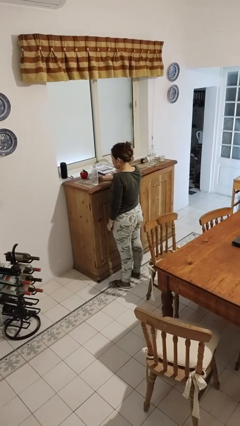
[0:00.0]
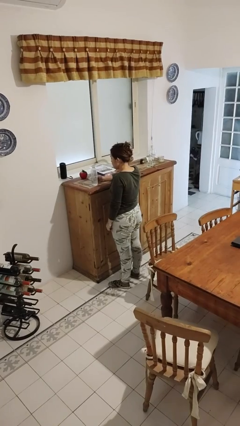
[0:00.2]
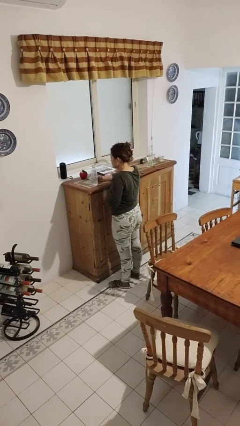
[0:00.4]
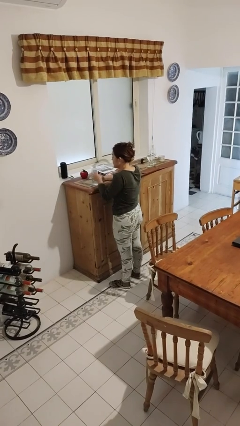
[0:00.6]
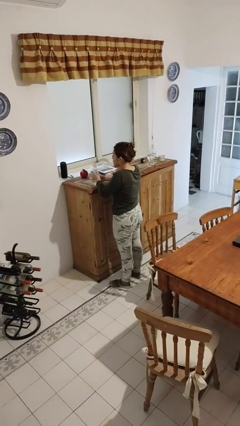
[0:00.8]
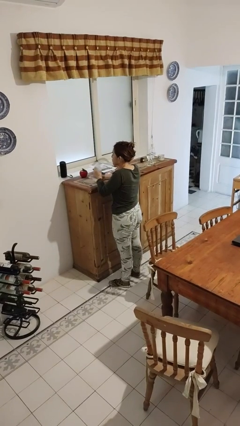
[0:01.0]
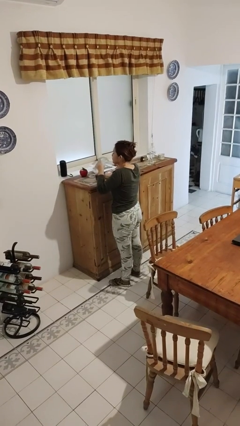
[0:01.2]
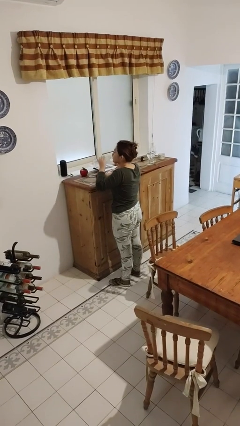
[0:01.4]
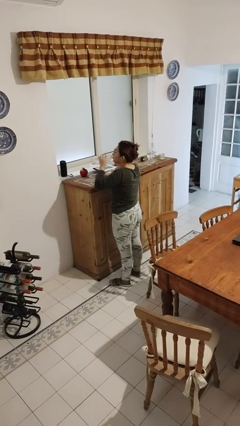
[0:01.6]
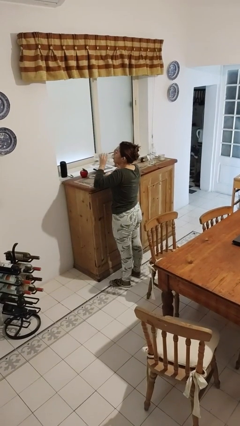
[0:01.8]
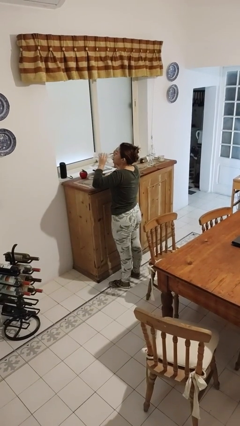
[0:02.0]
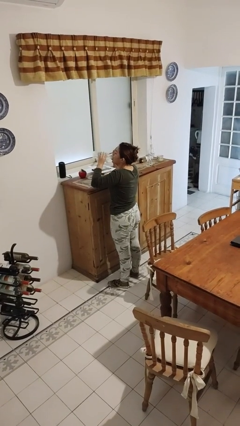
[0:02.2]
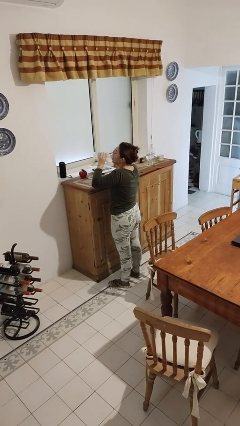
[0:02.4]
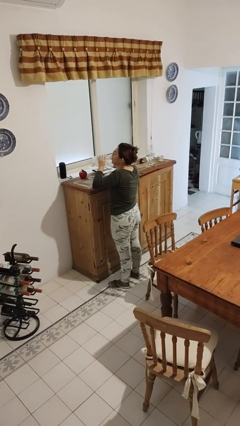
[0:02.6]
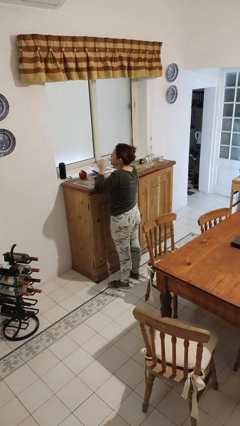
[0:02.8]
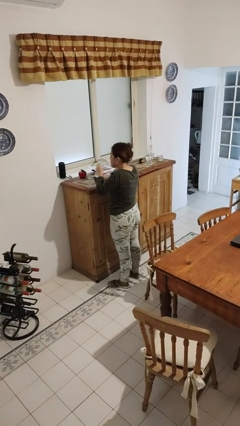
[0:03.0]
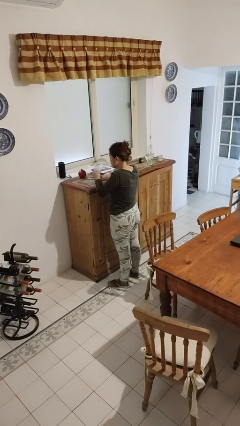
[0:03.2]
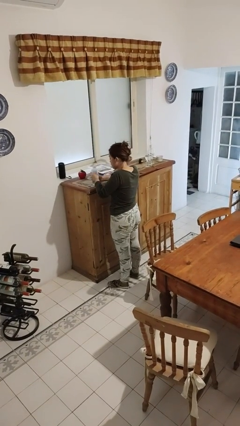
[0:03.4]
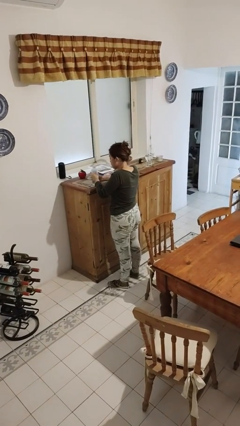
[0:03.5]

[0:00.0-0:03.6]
person drinks from bottle

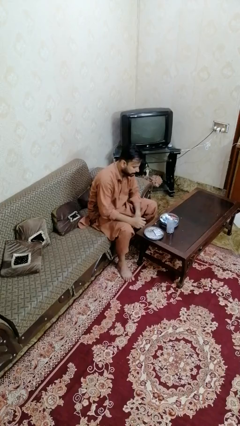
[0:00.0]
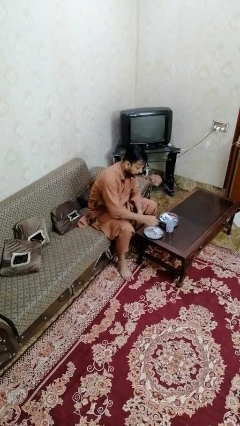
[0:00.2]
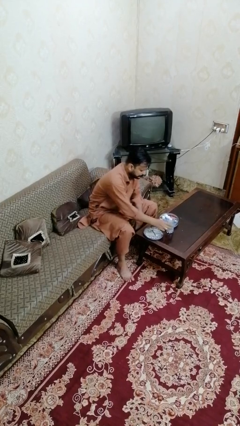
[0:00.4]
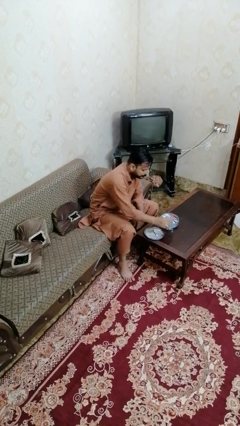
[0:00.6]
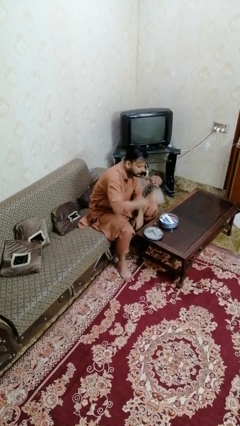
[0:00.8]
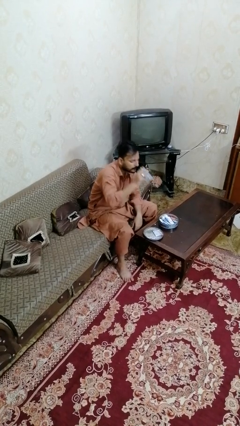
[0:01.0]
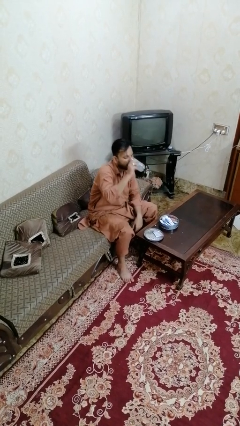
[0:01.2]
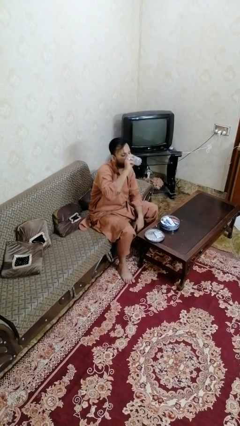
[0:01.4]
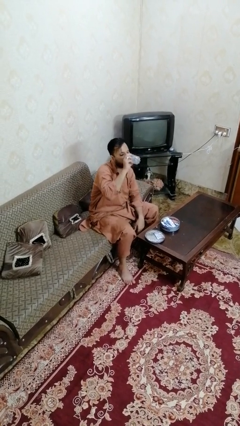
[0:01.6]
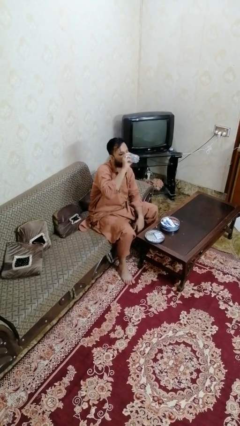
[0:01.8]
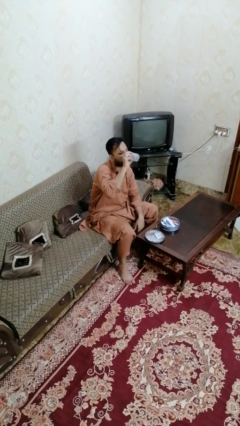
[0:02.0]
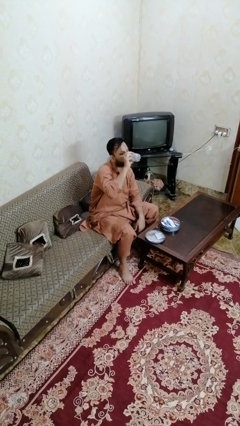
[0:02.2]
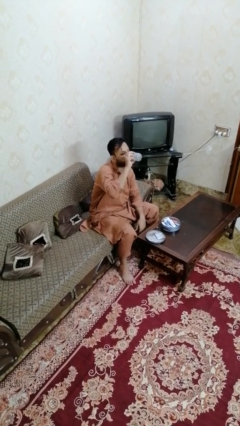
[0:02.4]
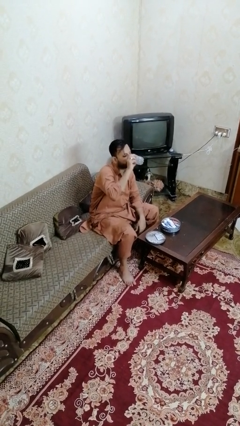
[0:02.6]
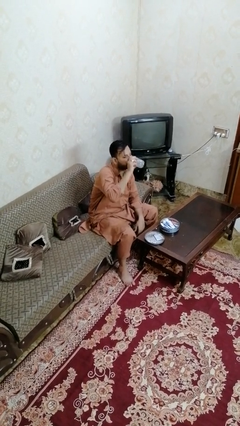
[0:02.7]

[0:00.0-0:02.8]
person drinks from cup

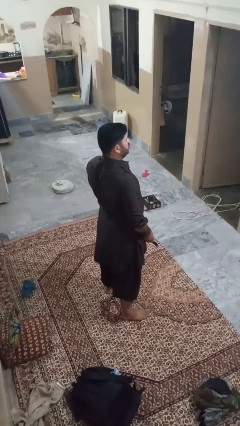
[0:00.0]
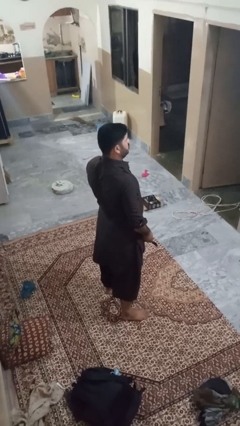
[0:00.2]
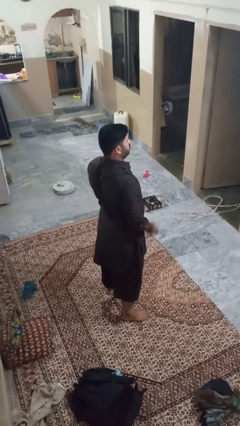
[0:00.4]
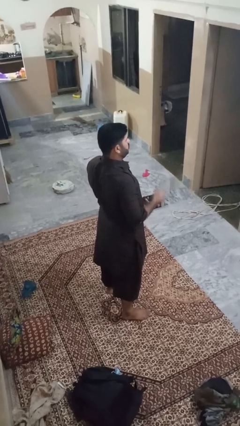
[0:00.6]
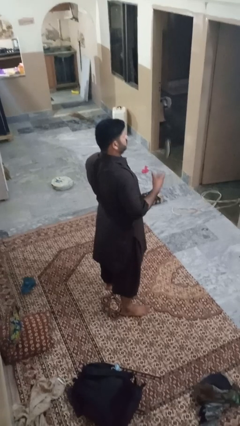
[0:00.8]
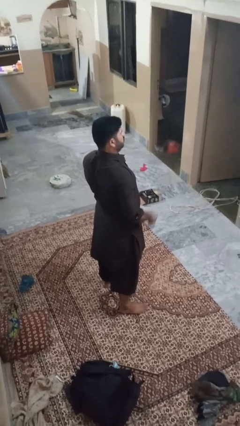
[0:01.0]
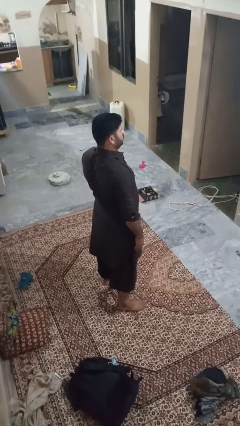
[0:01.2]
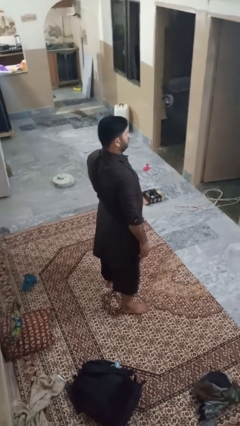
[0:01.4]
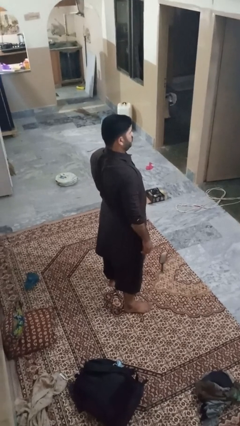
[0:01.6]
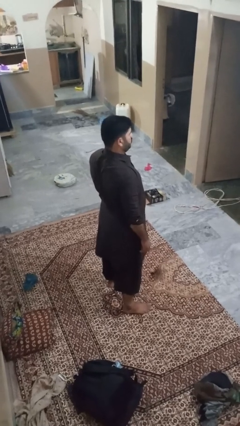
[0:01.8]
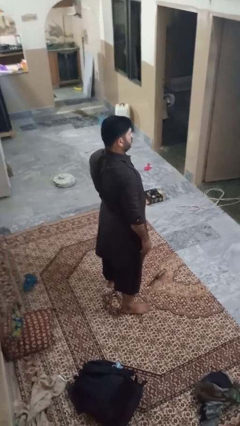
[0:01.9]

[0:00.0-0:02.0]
person throws object into air

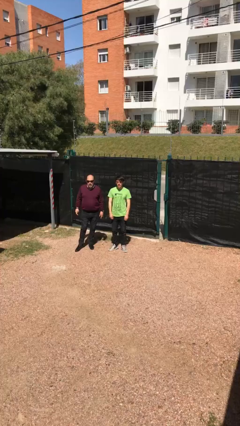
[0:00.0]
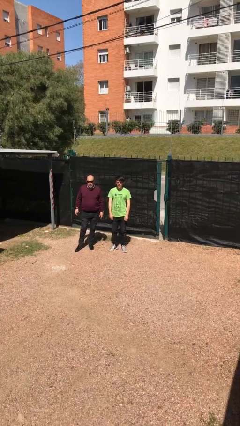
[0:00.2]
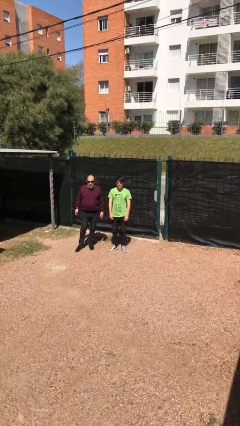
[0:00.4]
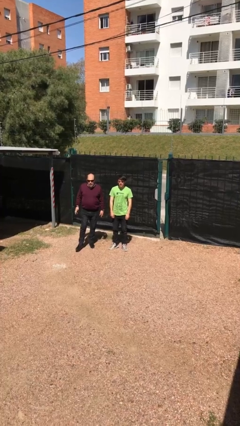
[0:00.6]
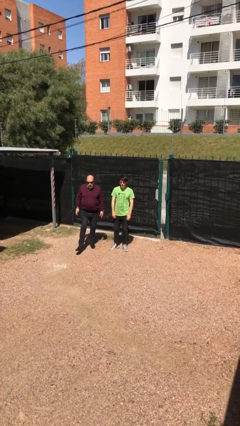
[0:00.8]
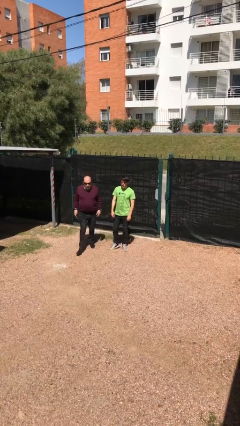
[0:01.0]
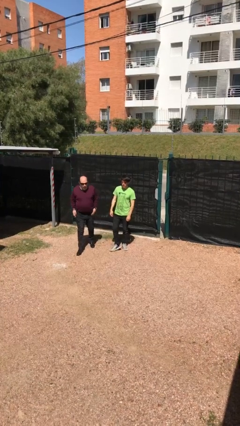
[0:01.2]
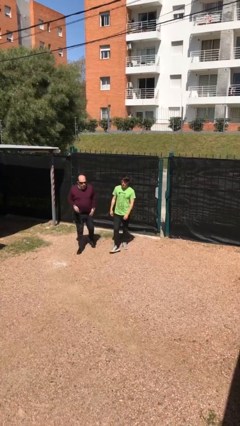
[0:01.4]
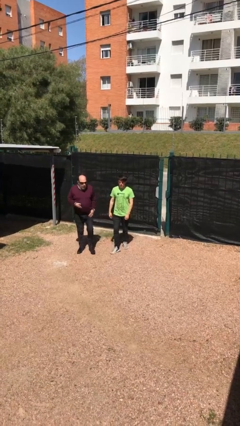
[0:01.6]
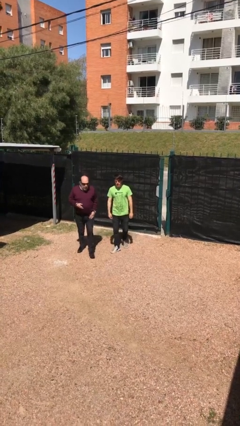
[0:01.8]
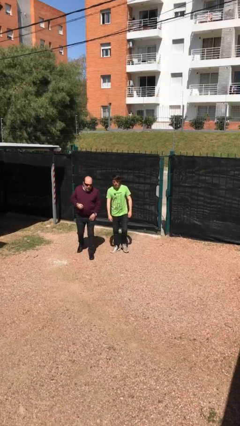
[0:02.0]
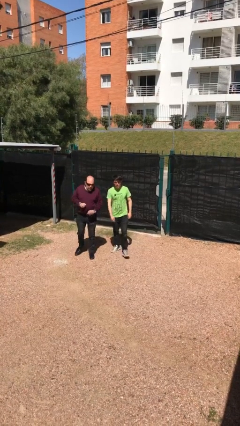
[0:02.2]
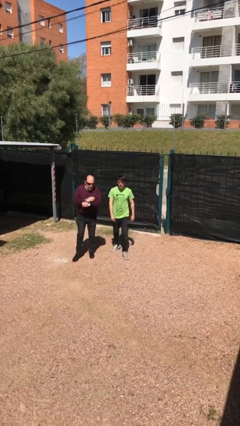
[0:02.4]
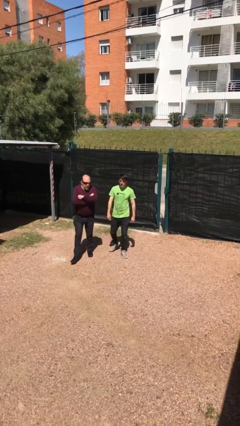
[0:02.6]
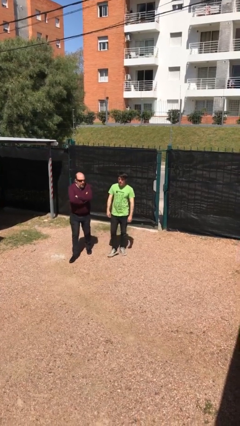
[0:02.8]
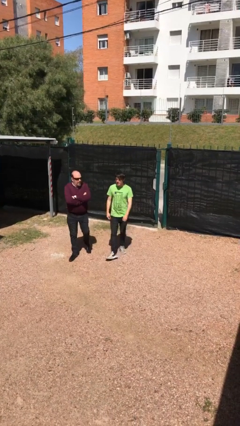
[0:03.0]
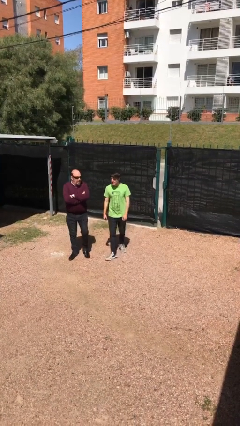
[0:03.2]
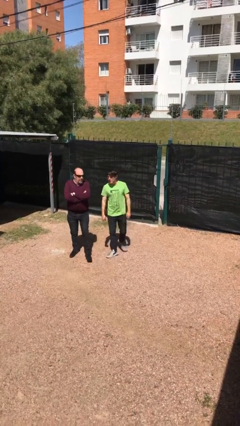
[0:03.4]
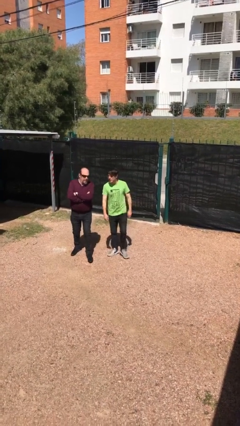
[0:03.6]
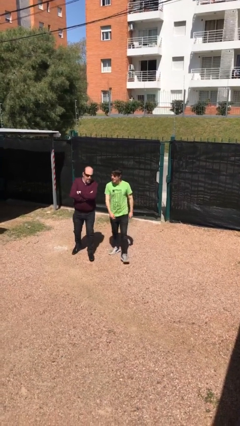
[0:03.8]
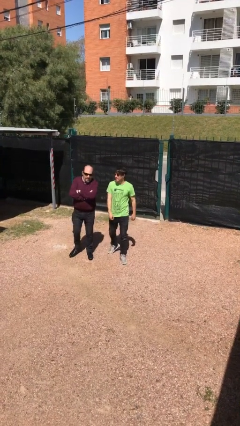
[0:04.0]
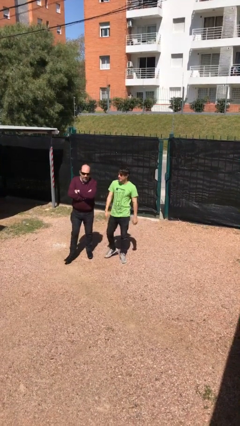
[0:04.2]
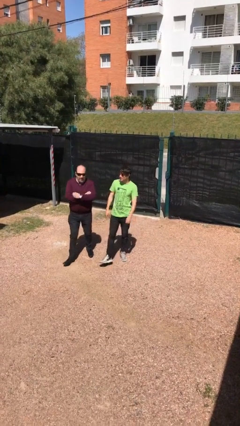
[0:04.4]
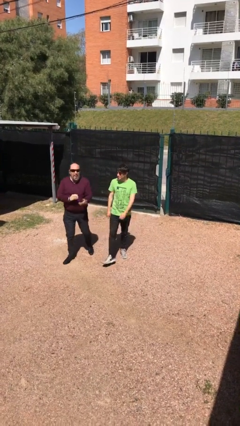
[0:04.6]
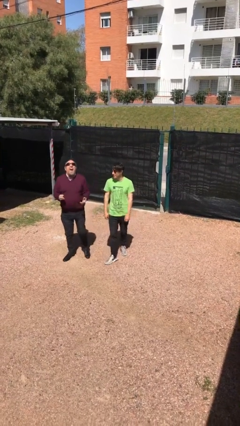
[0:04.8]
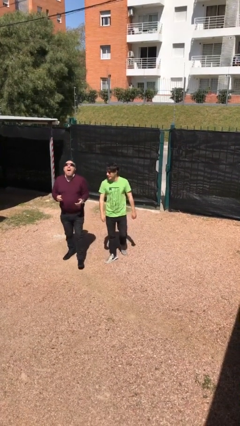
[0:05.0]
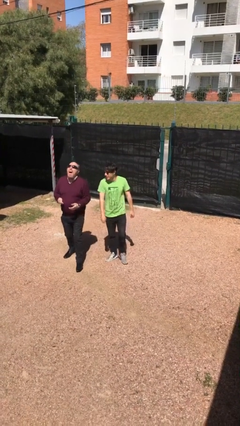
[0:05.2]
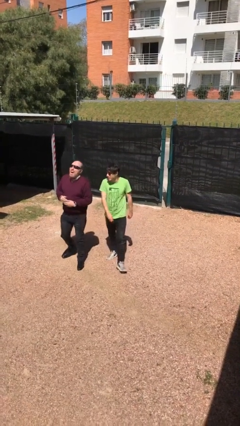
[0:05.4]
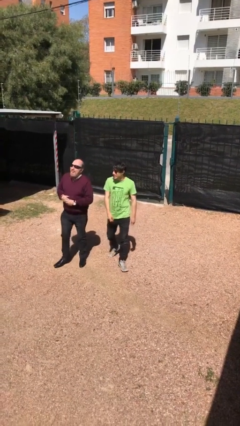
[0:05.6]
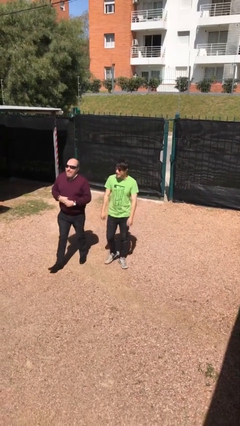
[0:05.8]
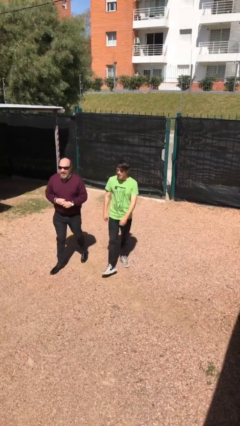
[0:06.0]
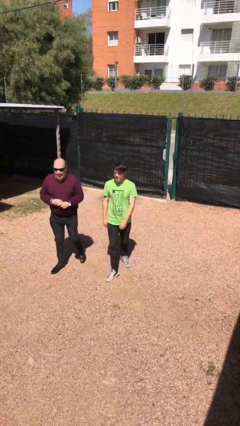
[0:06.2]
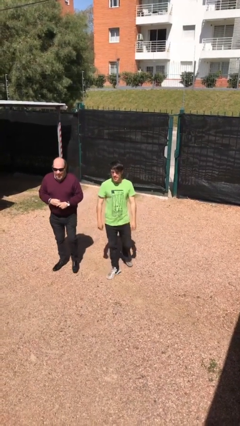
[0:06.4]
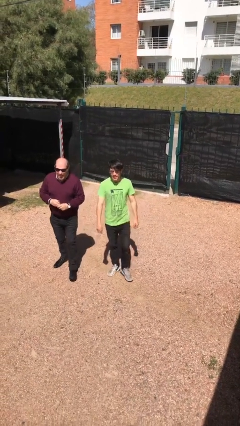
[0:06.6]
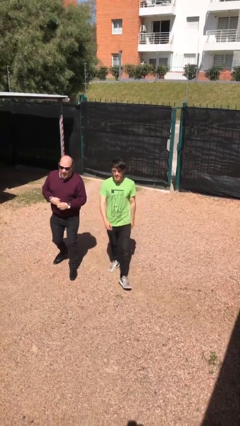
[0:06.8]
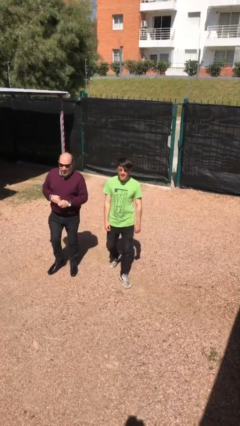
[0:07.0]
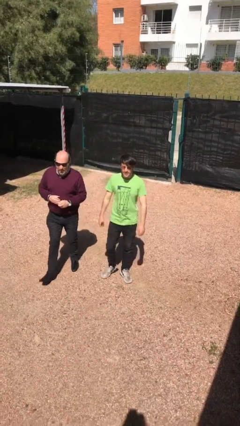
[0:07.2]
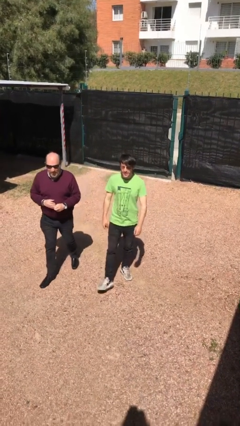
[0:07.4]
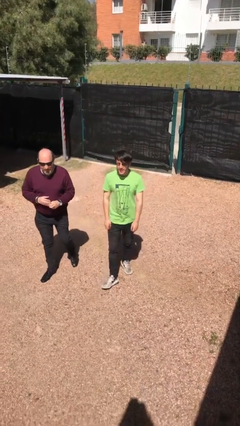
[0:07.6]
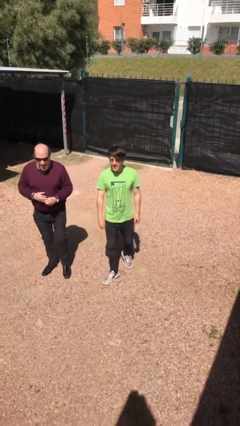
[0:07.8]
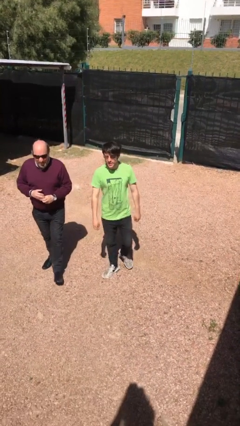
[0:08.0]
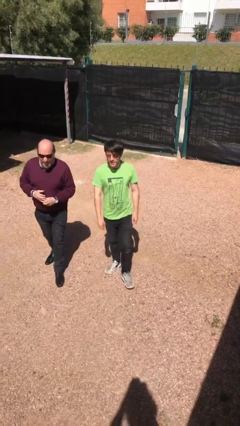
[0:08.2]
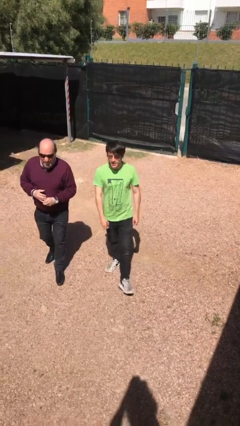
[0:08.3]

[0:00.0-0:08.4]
person talks to person

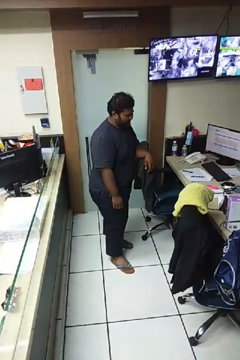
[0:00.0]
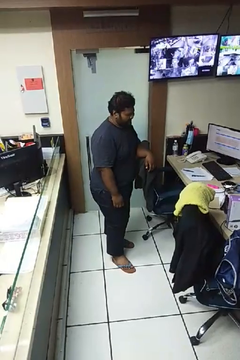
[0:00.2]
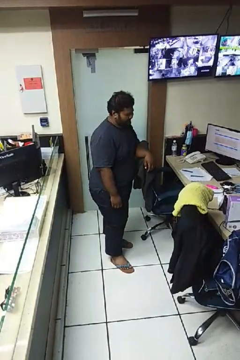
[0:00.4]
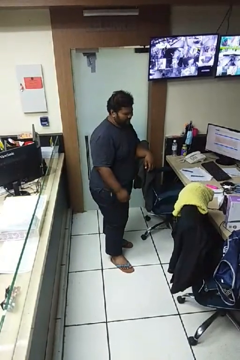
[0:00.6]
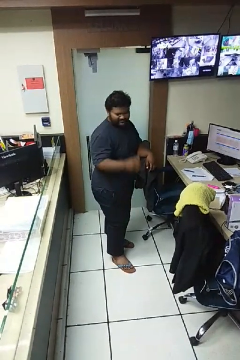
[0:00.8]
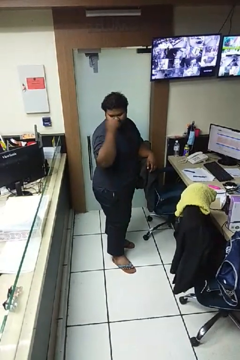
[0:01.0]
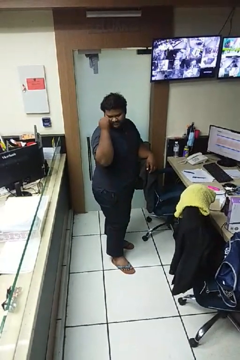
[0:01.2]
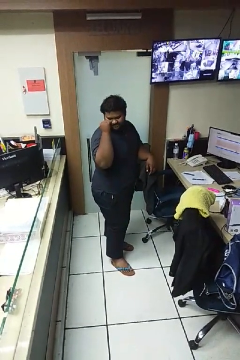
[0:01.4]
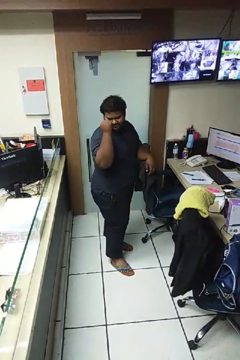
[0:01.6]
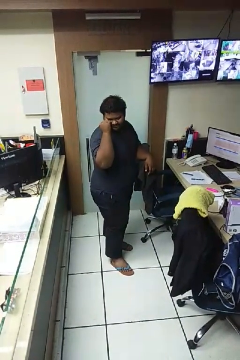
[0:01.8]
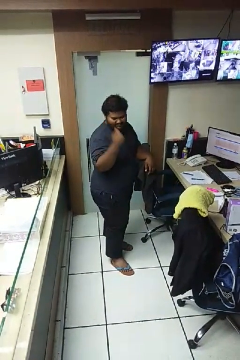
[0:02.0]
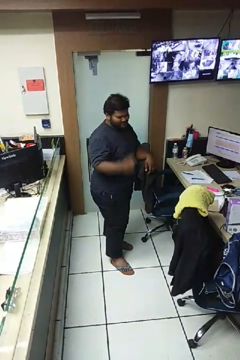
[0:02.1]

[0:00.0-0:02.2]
person gestures behind me
